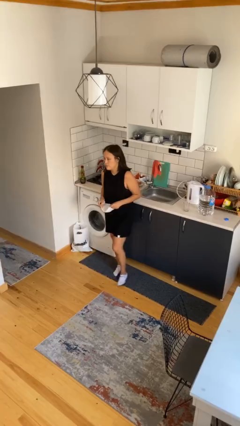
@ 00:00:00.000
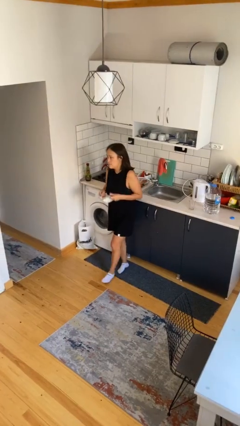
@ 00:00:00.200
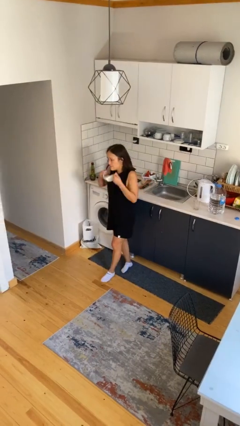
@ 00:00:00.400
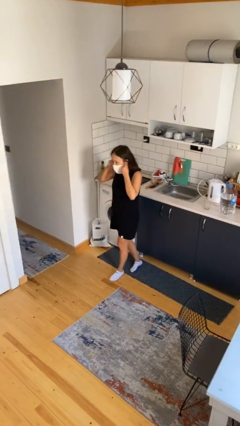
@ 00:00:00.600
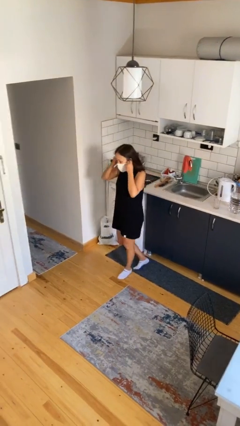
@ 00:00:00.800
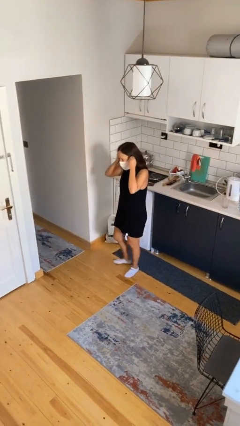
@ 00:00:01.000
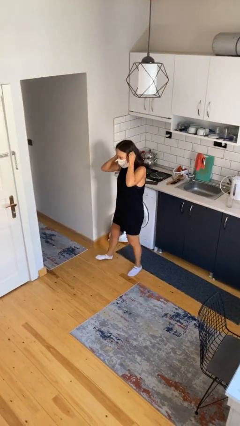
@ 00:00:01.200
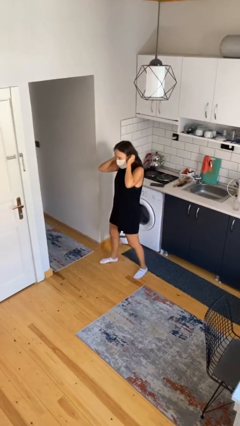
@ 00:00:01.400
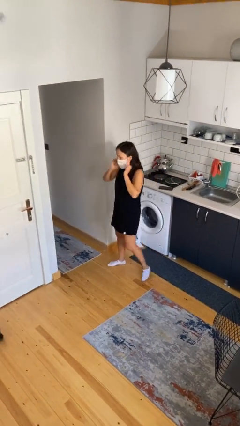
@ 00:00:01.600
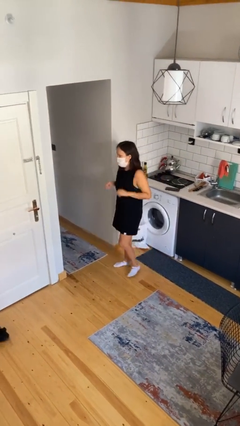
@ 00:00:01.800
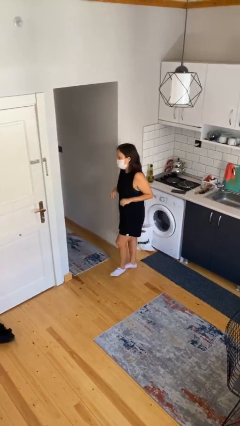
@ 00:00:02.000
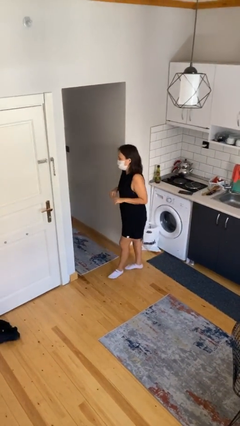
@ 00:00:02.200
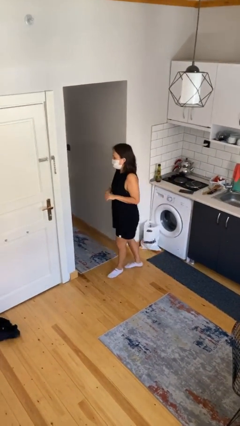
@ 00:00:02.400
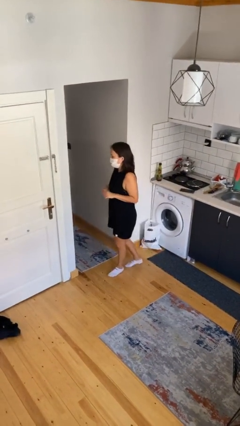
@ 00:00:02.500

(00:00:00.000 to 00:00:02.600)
person puts on facemask

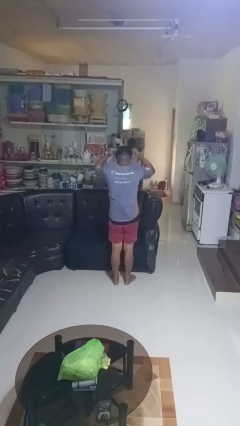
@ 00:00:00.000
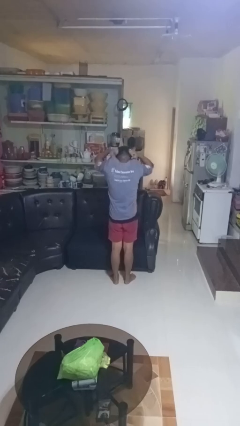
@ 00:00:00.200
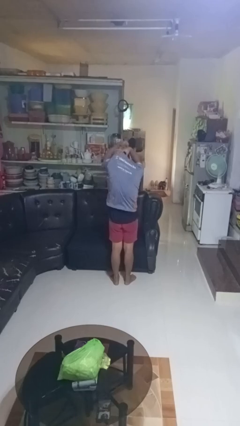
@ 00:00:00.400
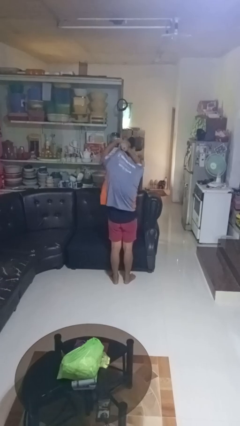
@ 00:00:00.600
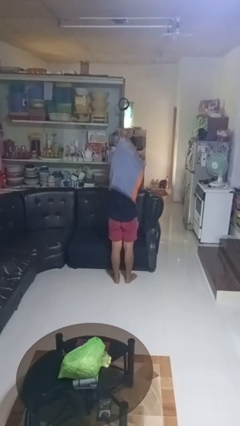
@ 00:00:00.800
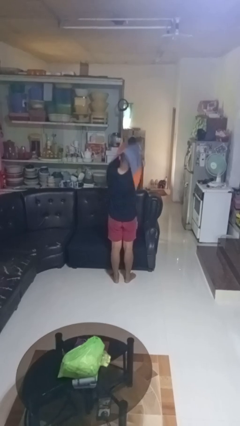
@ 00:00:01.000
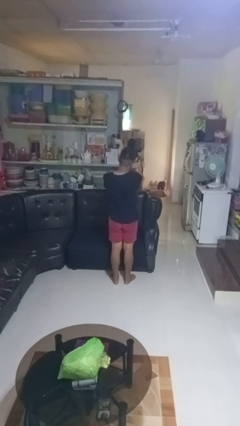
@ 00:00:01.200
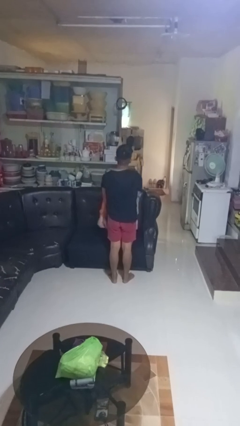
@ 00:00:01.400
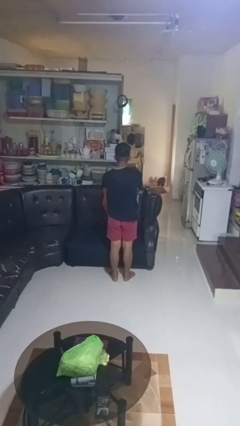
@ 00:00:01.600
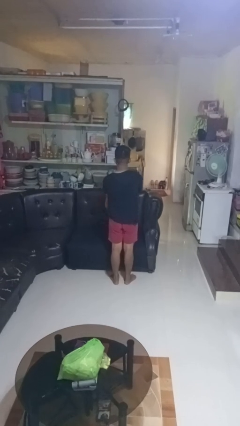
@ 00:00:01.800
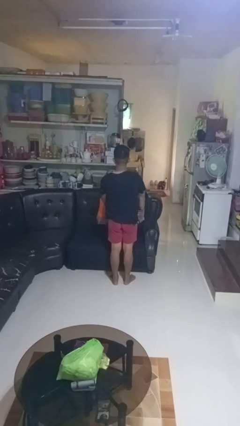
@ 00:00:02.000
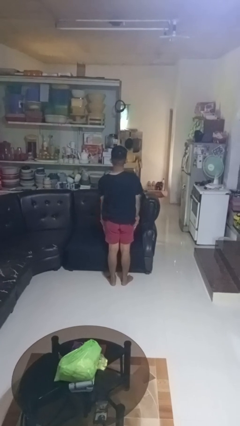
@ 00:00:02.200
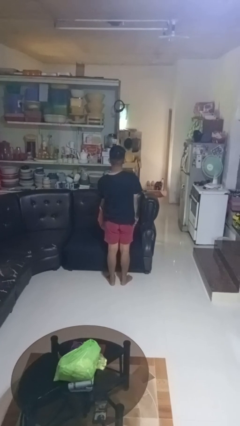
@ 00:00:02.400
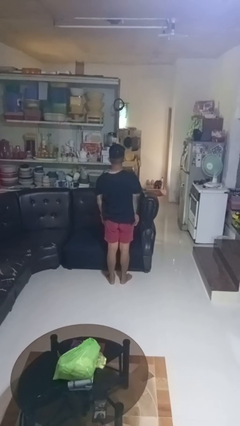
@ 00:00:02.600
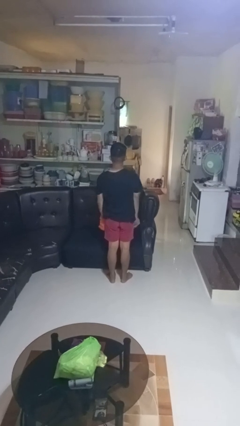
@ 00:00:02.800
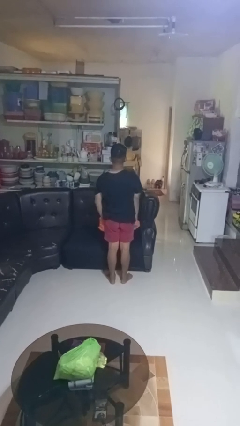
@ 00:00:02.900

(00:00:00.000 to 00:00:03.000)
person takes off shirt

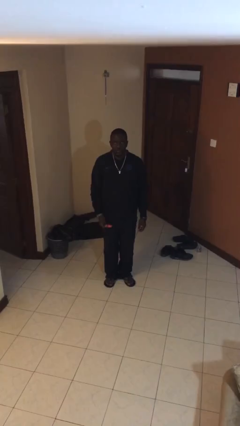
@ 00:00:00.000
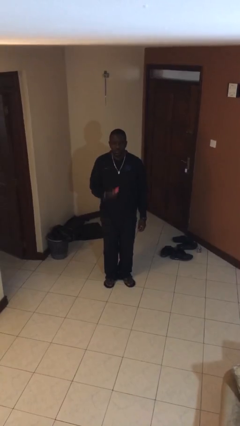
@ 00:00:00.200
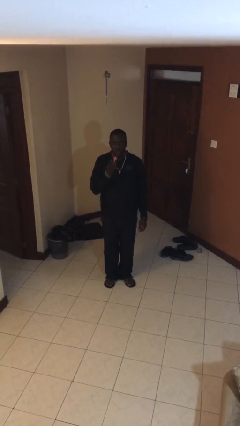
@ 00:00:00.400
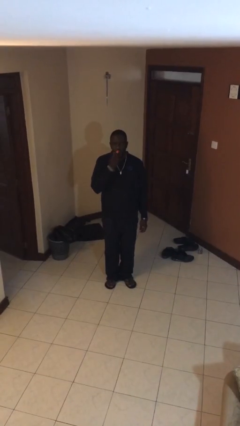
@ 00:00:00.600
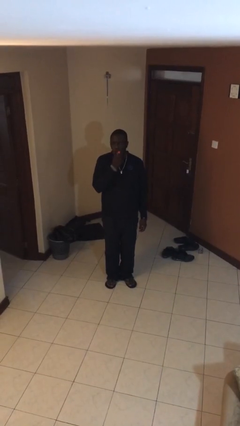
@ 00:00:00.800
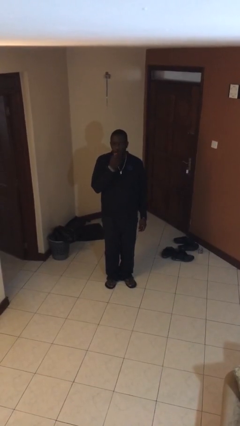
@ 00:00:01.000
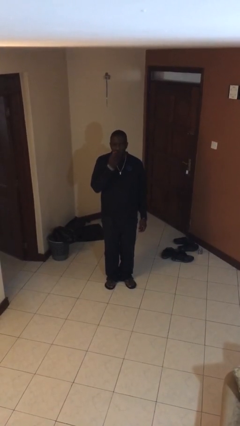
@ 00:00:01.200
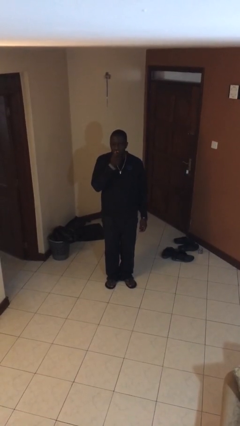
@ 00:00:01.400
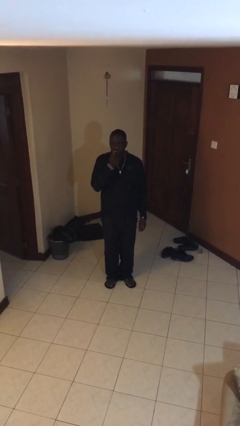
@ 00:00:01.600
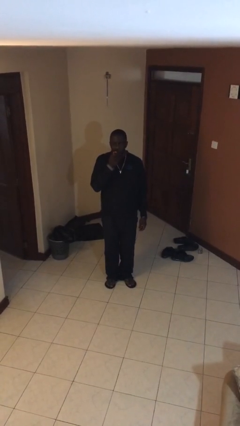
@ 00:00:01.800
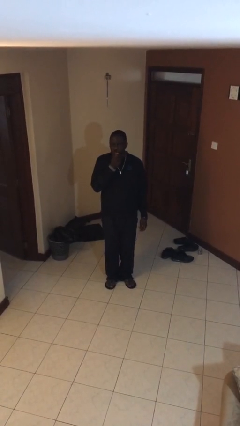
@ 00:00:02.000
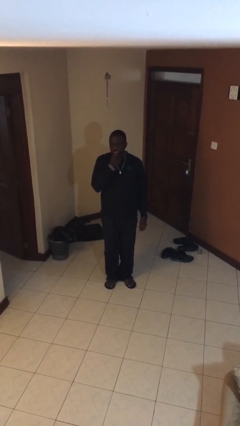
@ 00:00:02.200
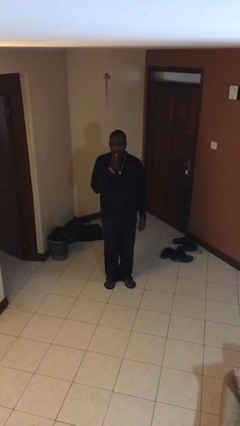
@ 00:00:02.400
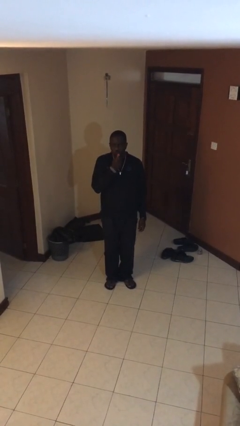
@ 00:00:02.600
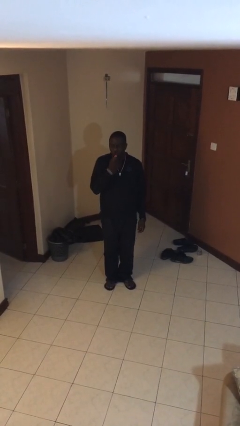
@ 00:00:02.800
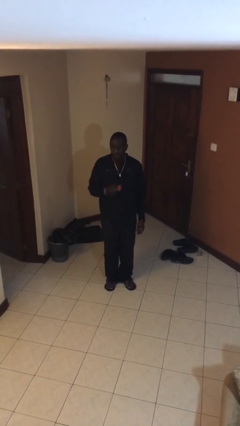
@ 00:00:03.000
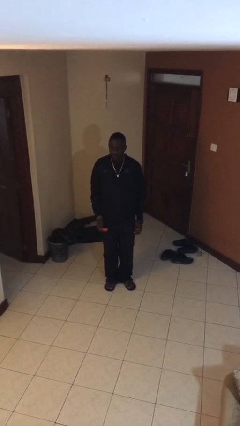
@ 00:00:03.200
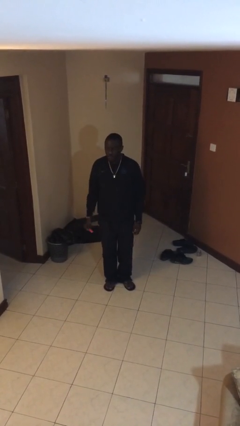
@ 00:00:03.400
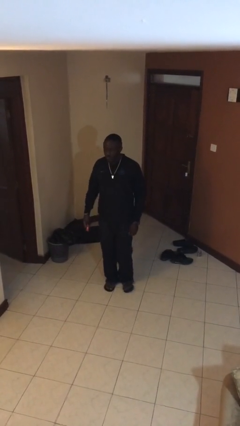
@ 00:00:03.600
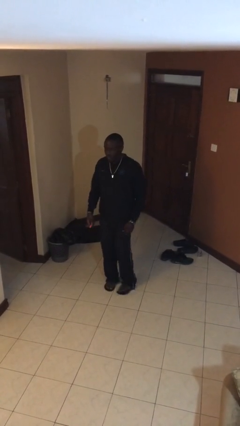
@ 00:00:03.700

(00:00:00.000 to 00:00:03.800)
person applies lip makeup

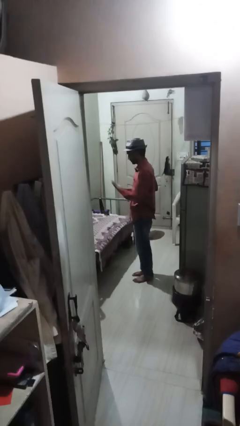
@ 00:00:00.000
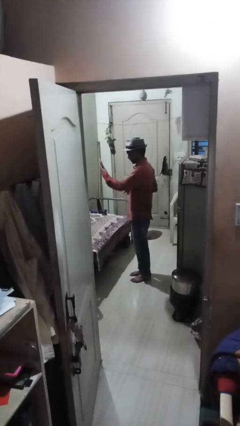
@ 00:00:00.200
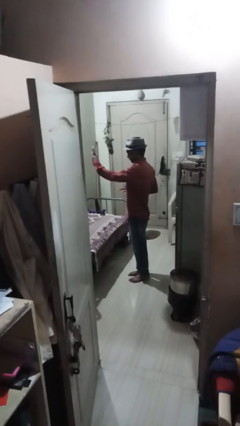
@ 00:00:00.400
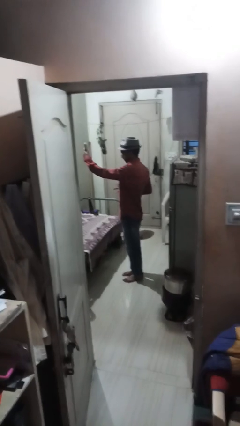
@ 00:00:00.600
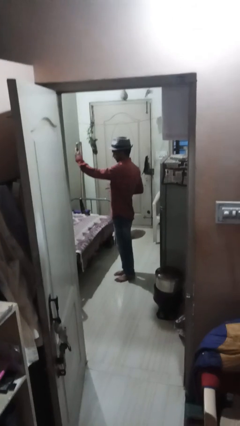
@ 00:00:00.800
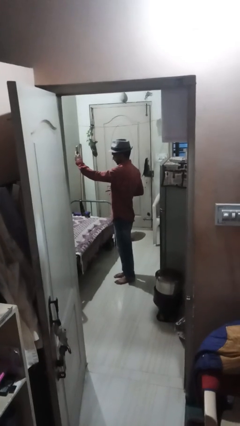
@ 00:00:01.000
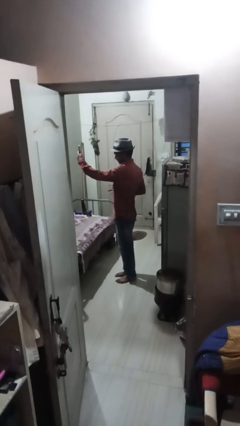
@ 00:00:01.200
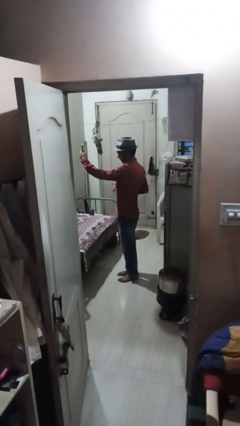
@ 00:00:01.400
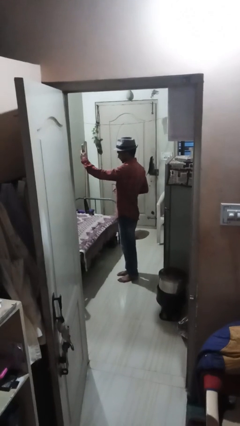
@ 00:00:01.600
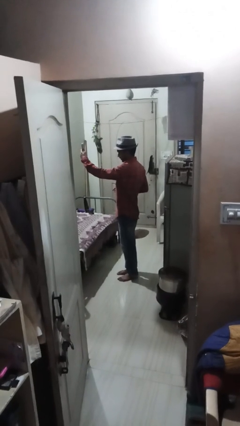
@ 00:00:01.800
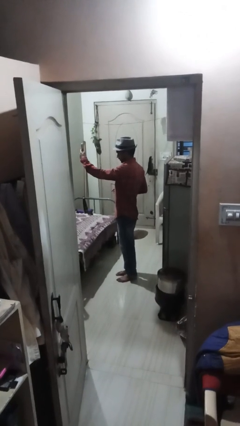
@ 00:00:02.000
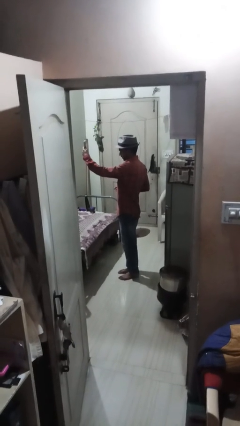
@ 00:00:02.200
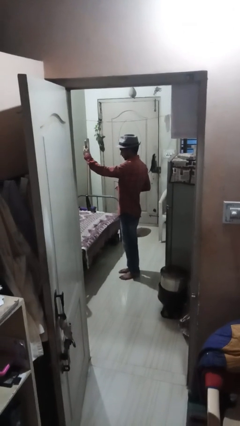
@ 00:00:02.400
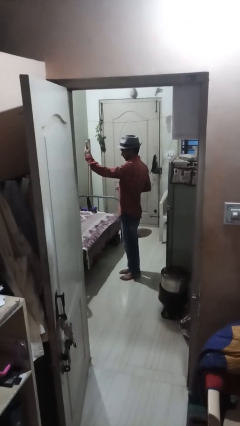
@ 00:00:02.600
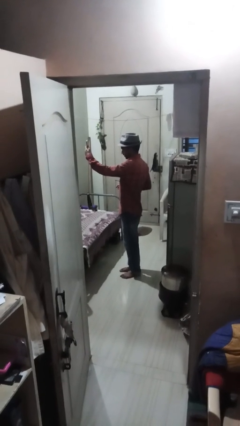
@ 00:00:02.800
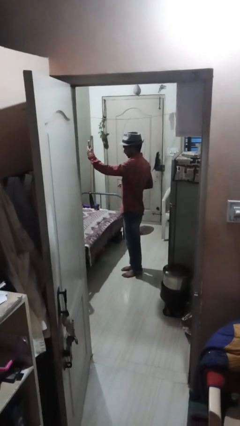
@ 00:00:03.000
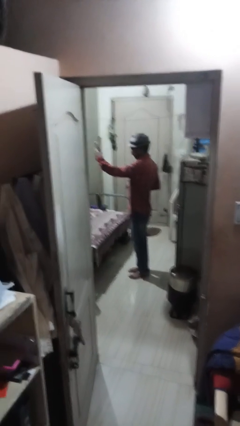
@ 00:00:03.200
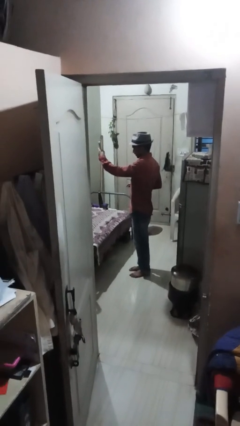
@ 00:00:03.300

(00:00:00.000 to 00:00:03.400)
person takes selfie

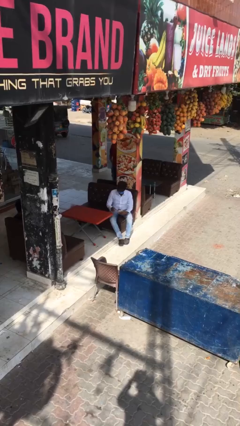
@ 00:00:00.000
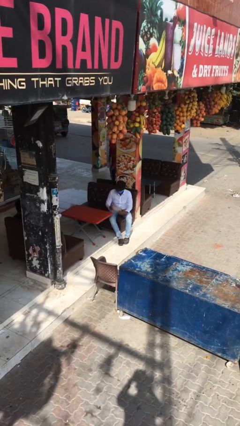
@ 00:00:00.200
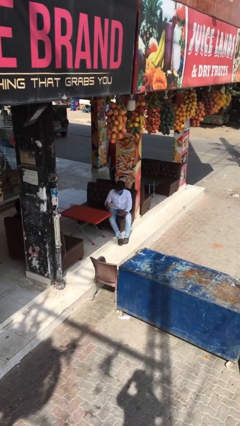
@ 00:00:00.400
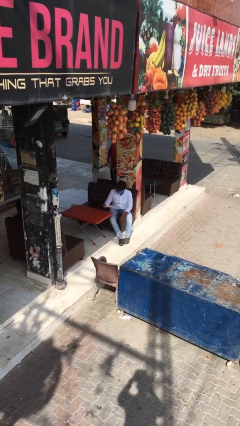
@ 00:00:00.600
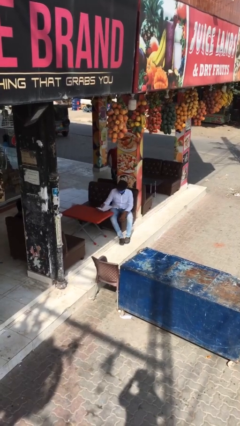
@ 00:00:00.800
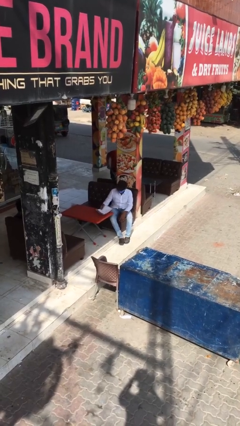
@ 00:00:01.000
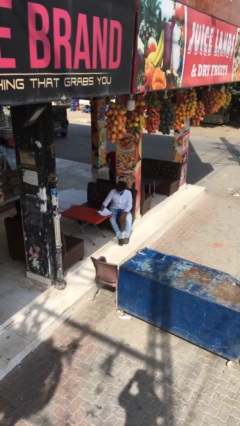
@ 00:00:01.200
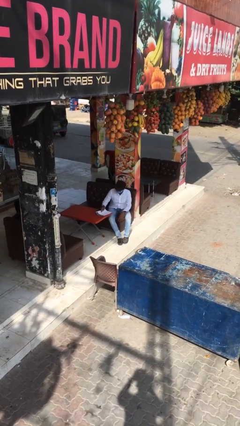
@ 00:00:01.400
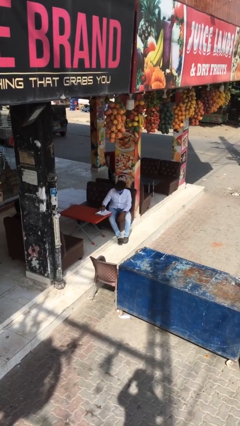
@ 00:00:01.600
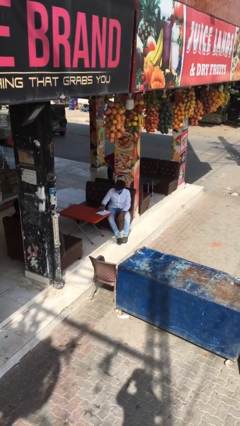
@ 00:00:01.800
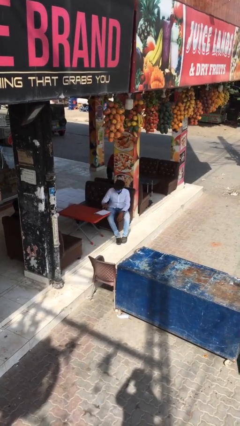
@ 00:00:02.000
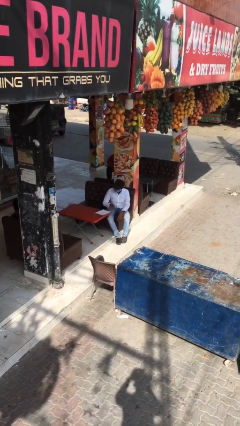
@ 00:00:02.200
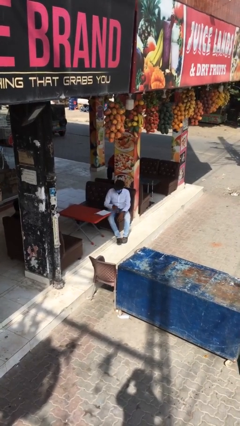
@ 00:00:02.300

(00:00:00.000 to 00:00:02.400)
person puts down object on table

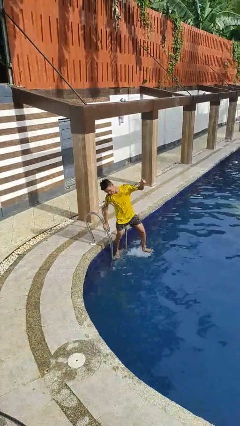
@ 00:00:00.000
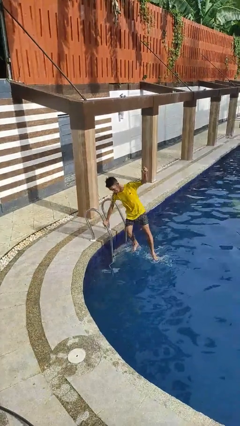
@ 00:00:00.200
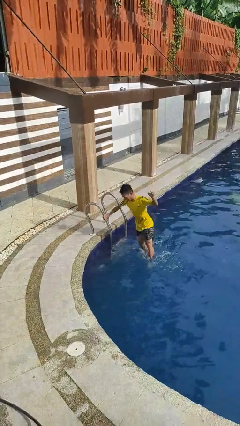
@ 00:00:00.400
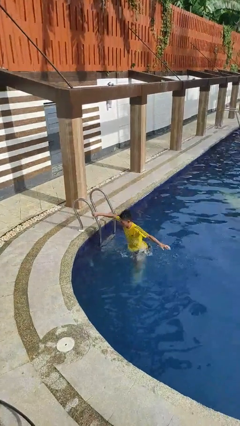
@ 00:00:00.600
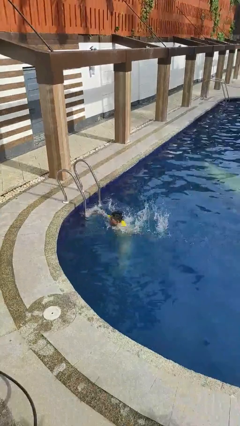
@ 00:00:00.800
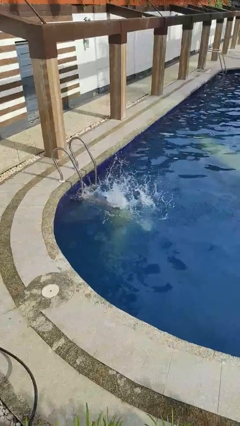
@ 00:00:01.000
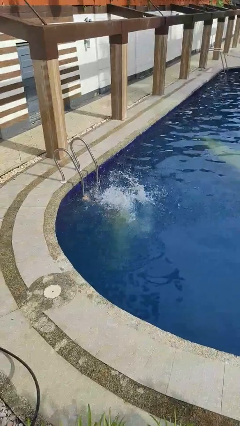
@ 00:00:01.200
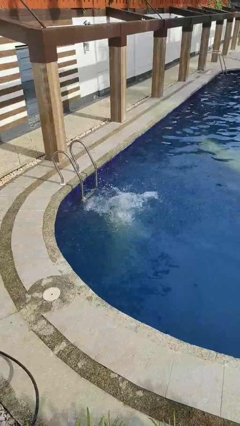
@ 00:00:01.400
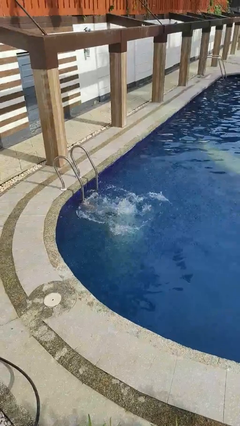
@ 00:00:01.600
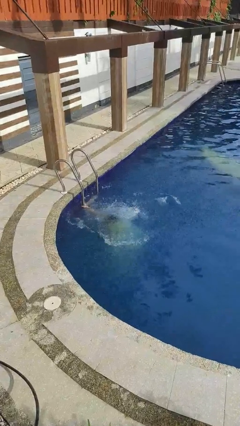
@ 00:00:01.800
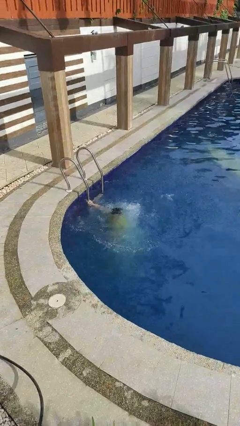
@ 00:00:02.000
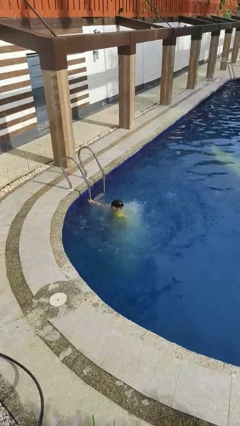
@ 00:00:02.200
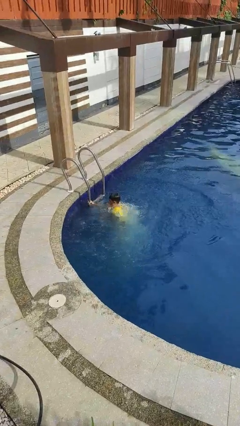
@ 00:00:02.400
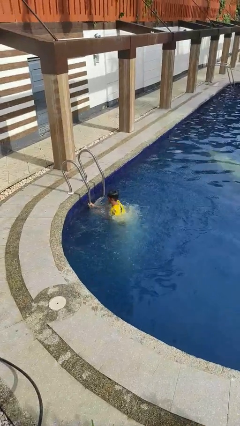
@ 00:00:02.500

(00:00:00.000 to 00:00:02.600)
person jumps into pool
